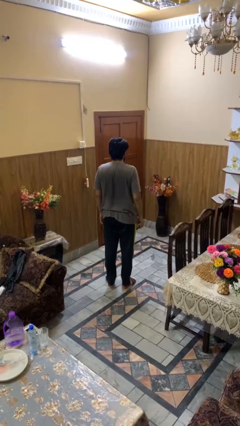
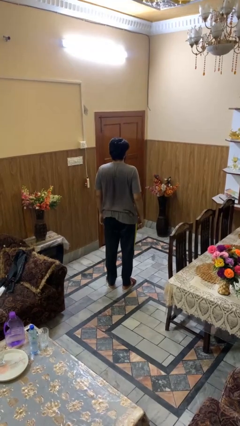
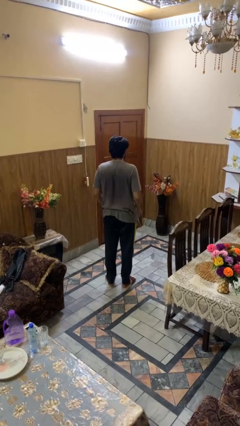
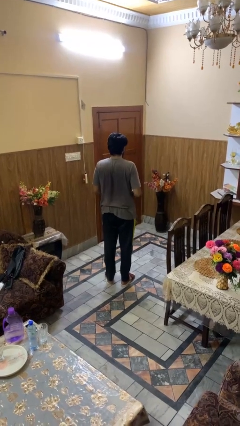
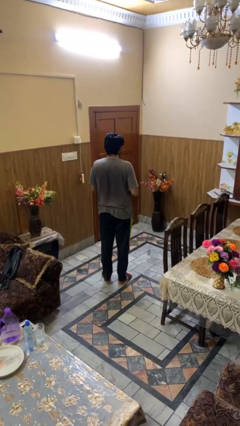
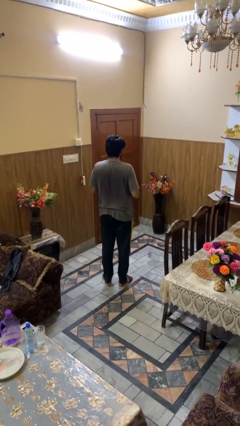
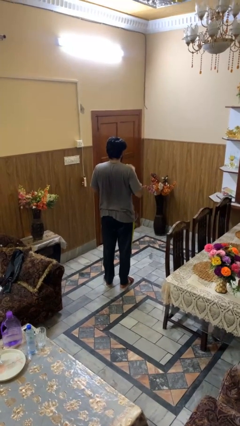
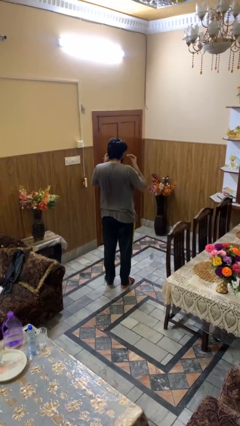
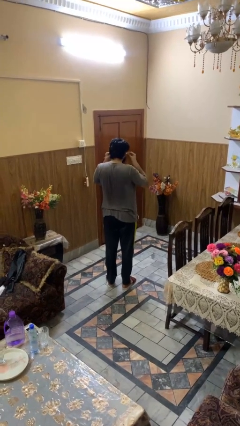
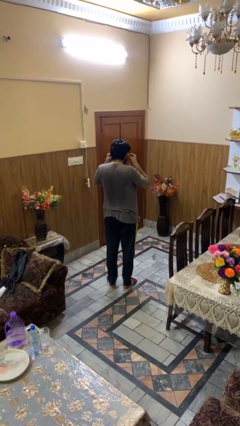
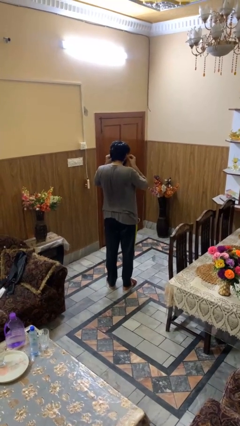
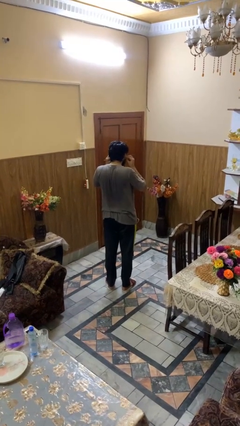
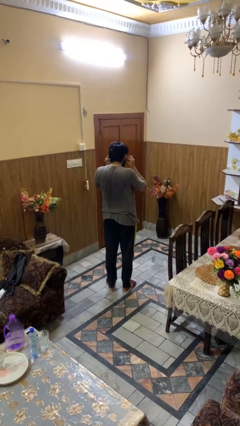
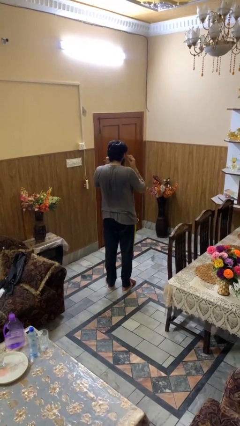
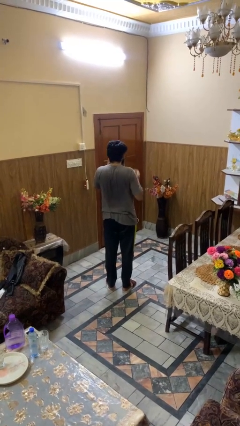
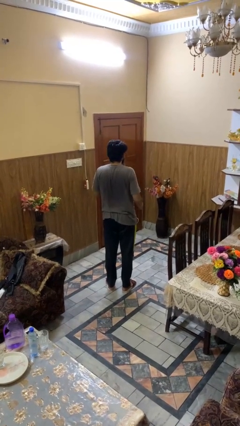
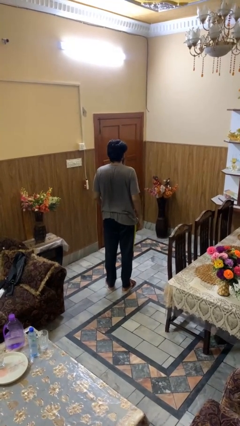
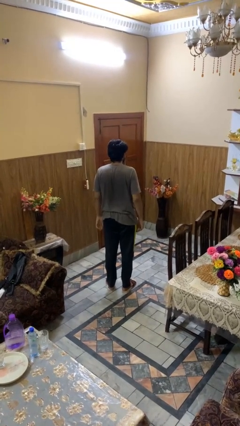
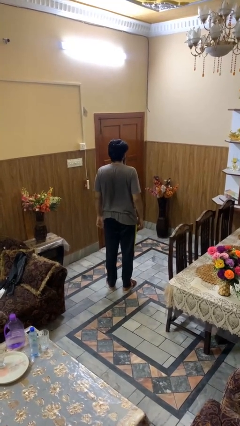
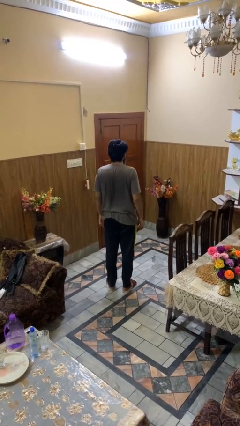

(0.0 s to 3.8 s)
person puts on headphones

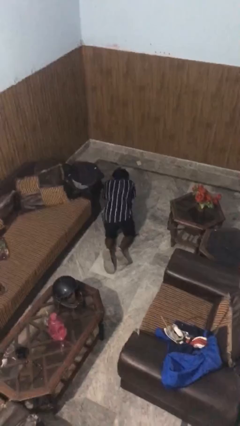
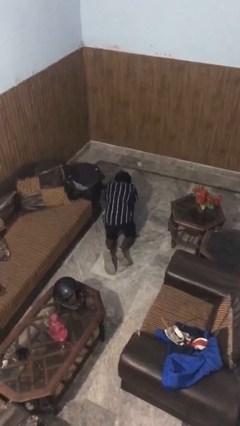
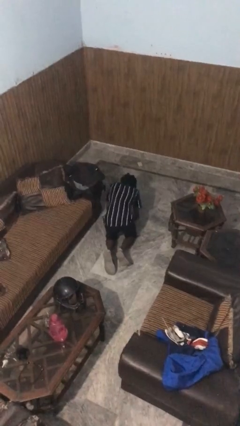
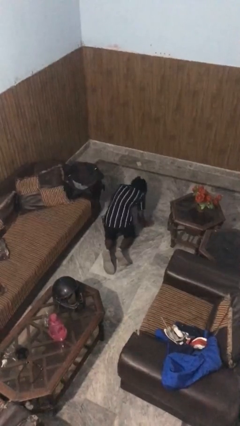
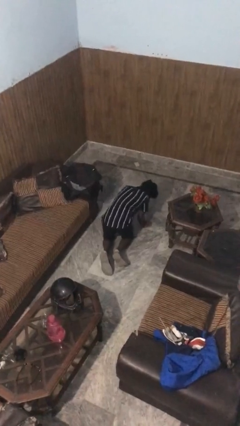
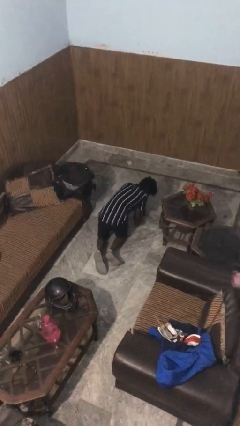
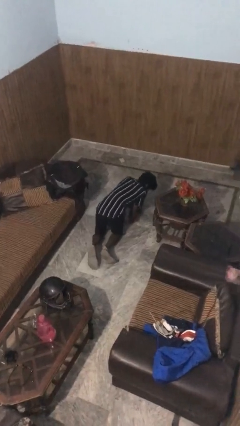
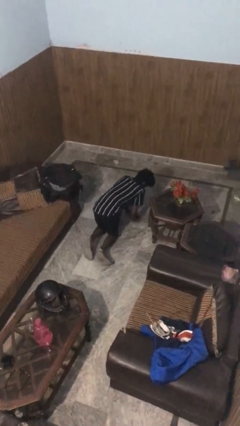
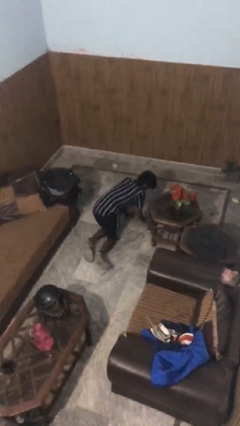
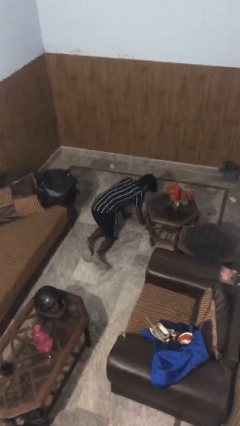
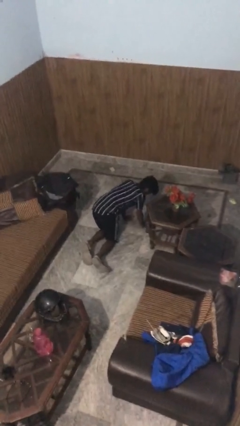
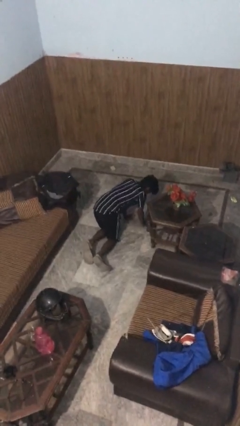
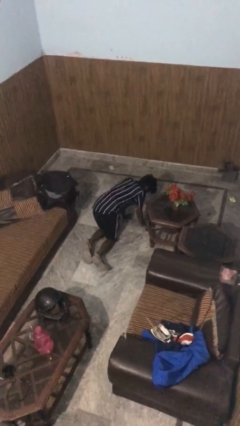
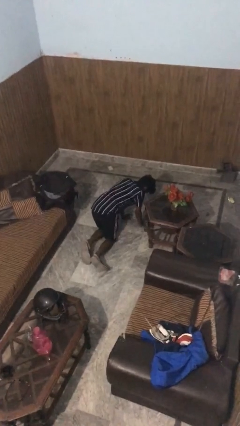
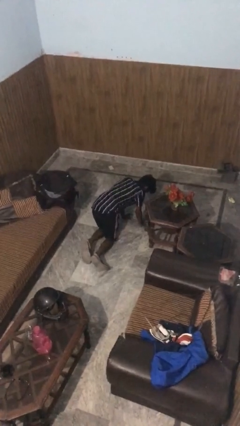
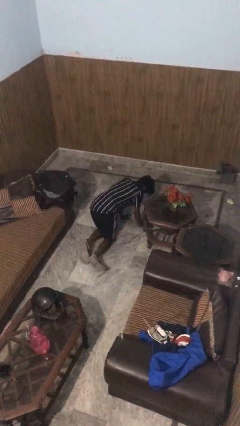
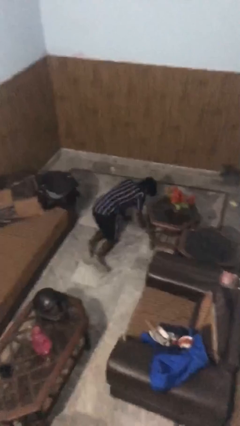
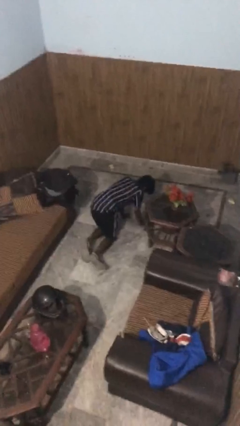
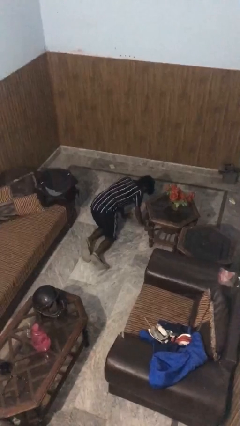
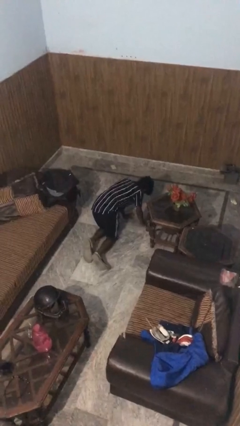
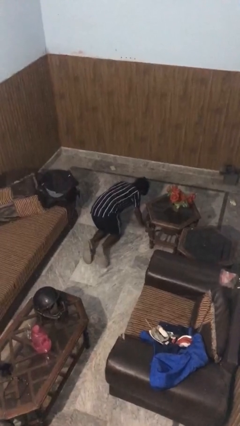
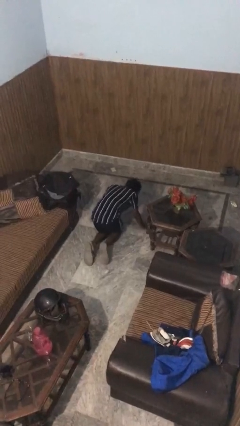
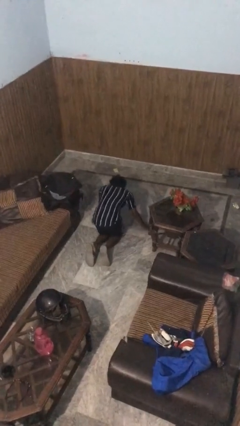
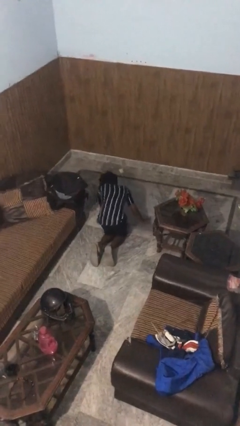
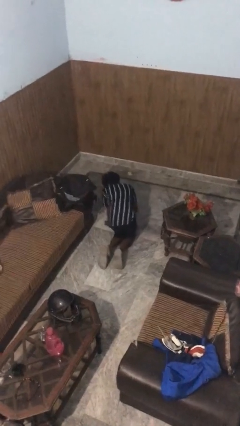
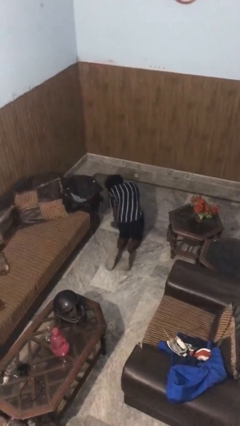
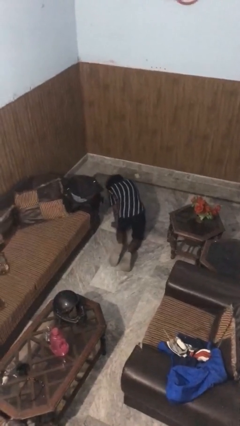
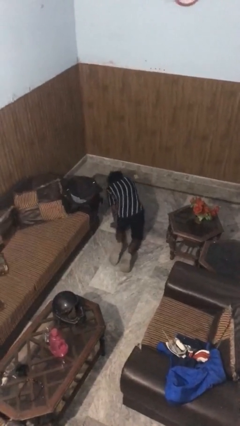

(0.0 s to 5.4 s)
person crawls

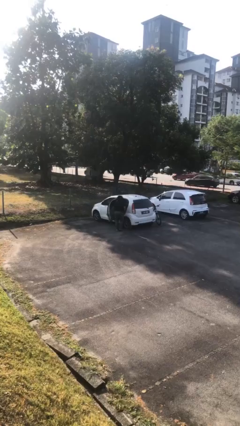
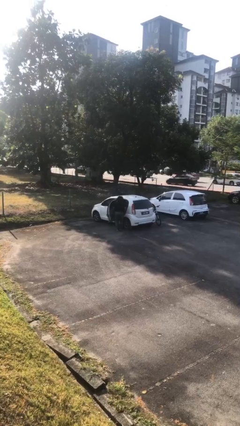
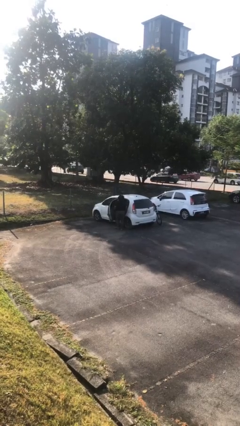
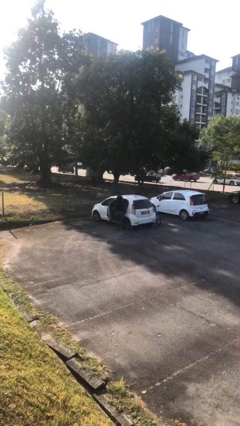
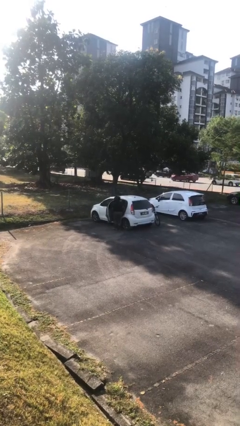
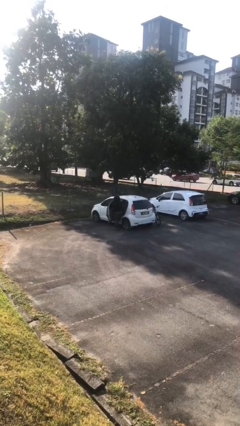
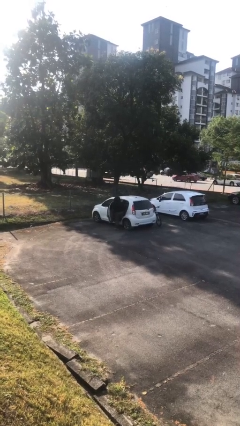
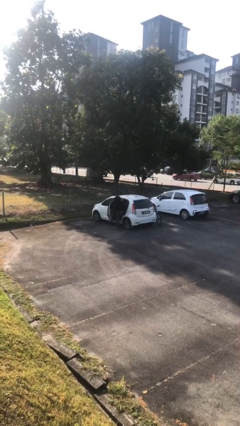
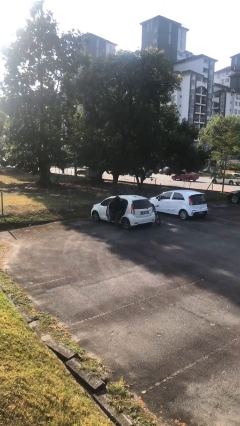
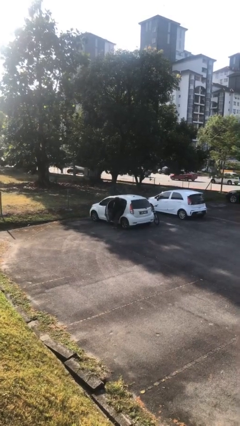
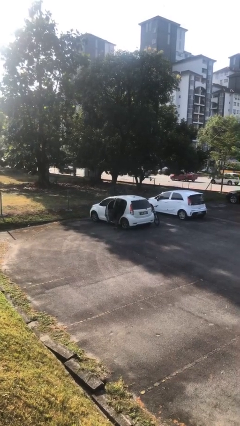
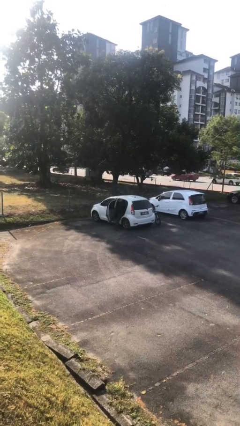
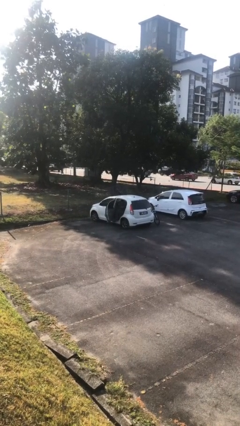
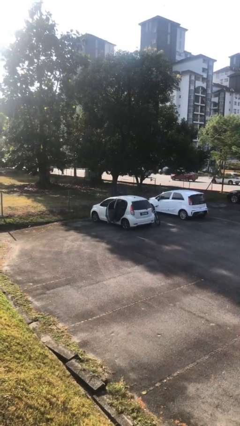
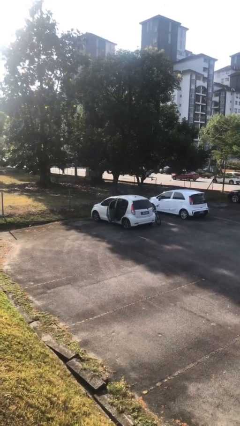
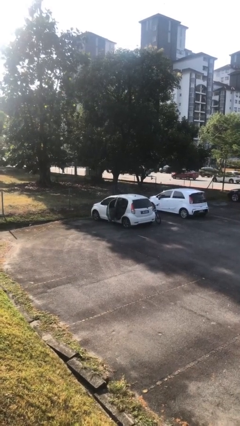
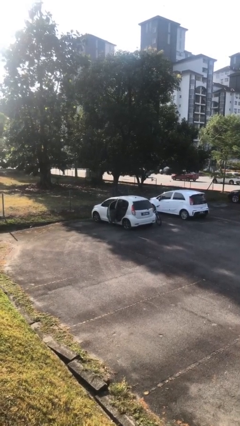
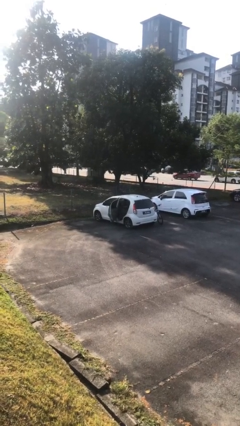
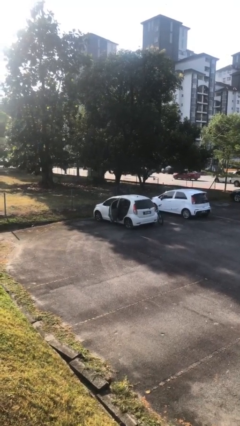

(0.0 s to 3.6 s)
person enters car

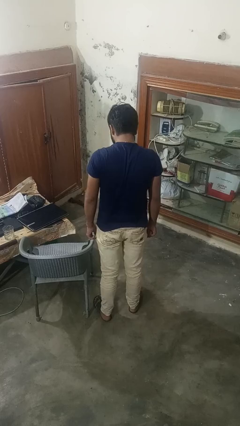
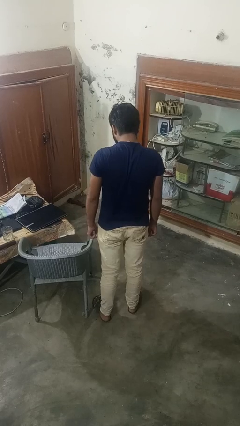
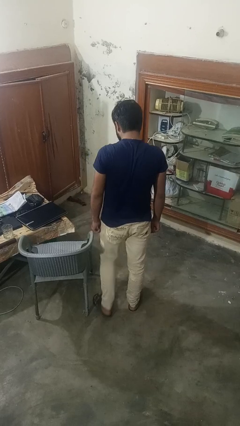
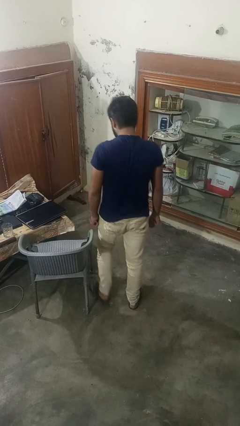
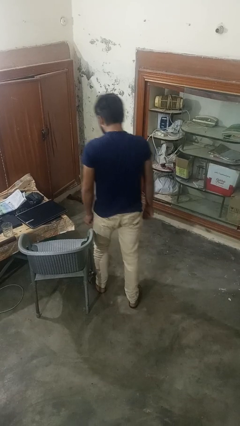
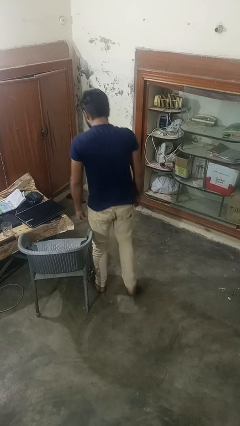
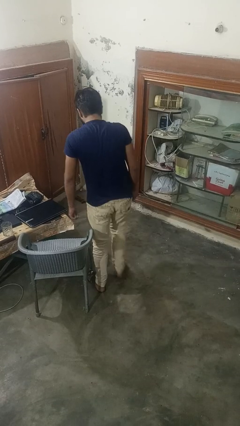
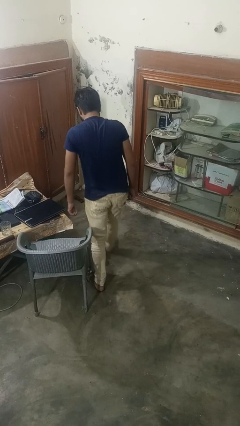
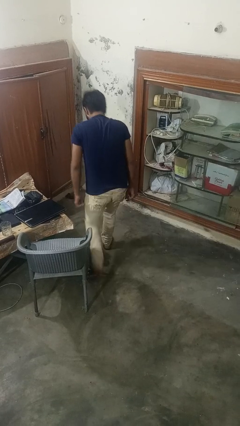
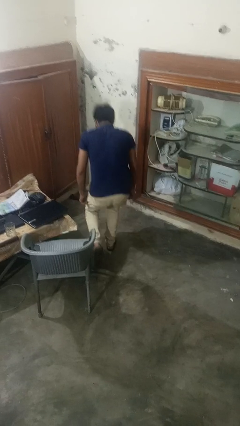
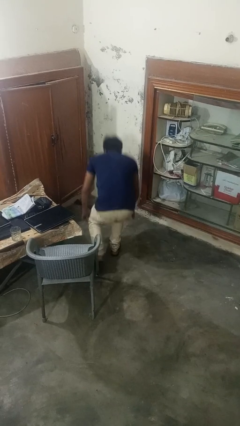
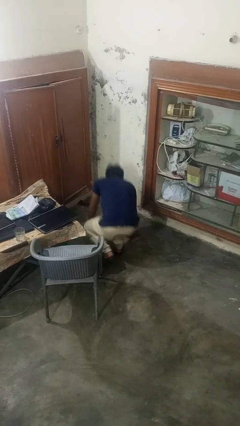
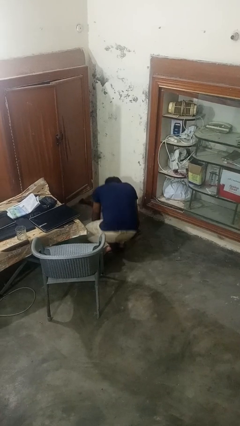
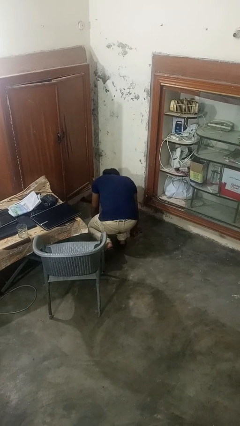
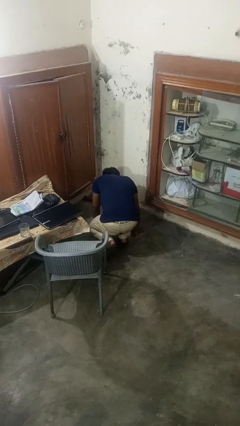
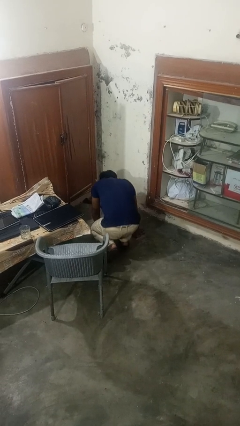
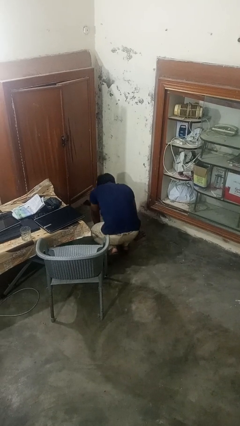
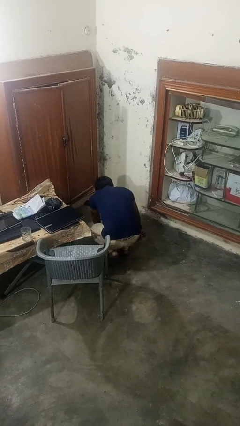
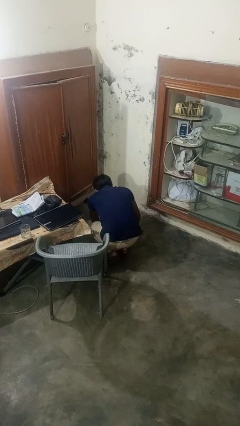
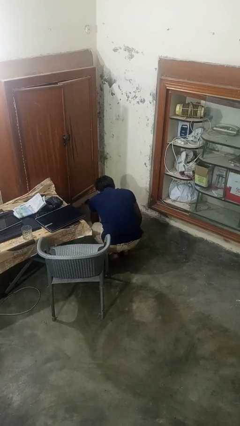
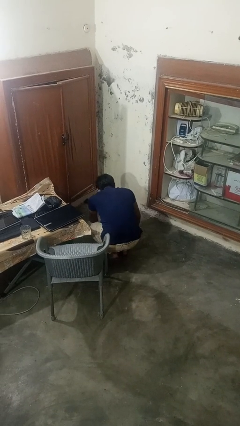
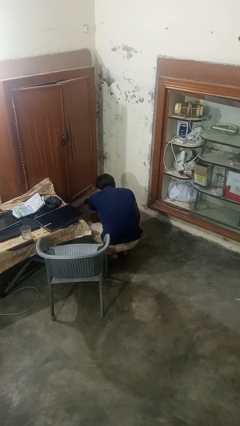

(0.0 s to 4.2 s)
person trips on object on floor

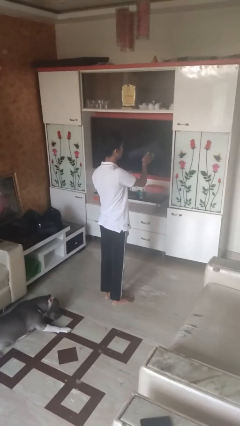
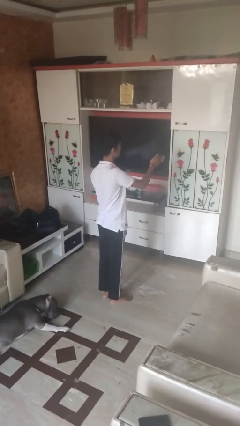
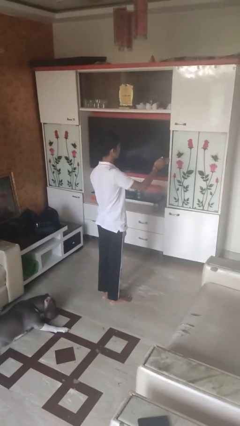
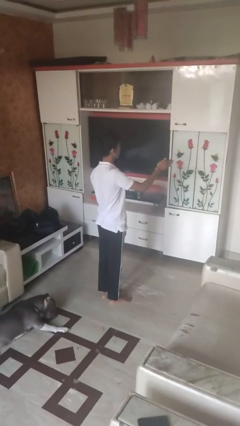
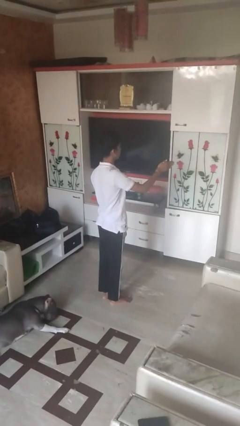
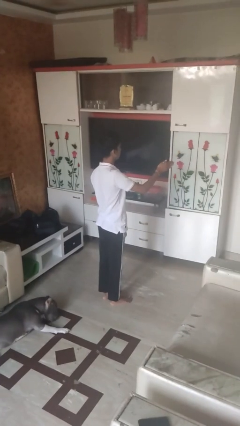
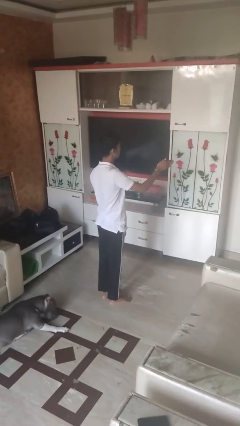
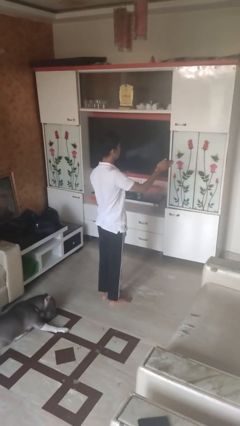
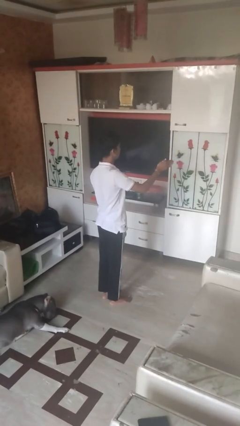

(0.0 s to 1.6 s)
person gestures swipe right
